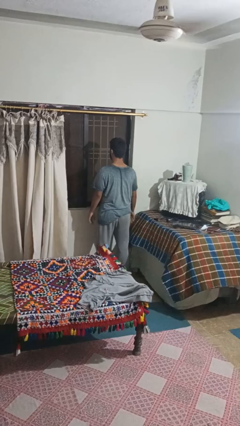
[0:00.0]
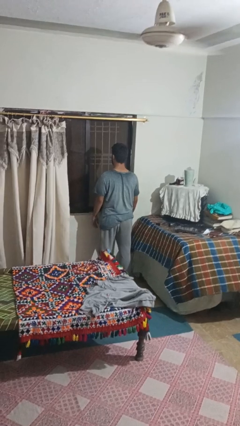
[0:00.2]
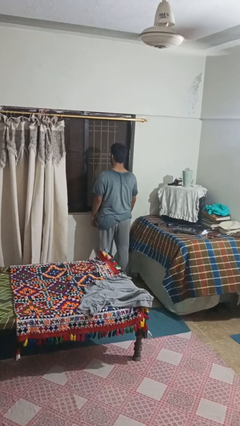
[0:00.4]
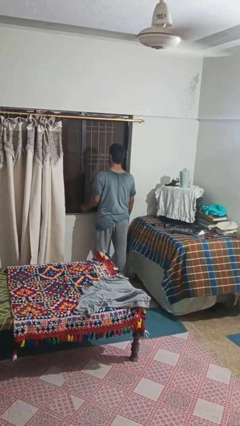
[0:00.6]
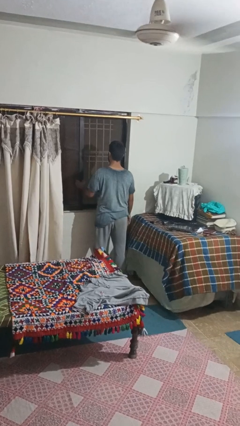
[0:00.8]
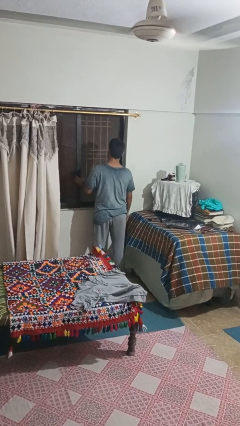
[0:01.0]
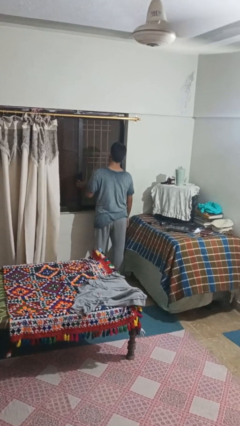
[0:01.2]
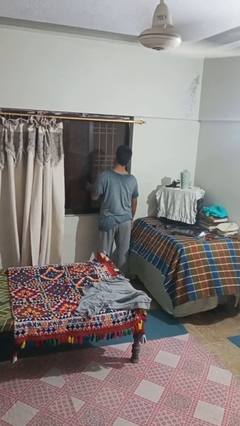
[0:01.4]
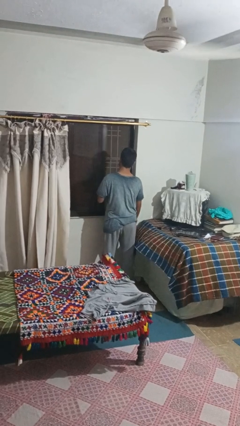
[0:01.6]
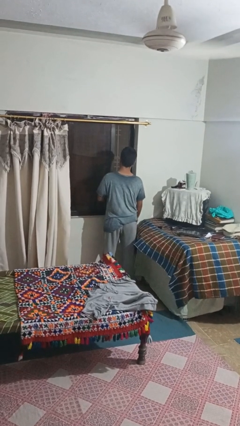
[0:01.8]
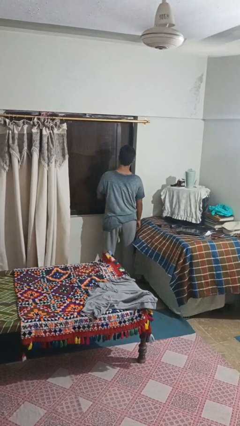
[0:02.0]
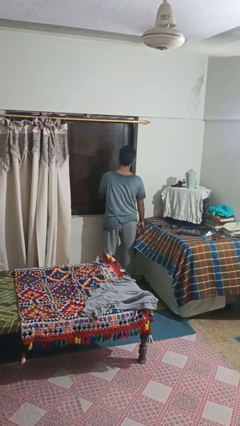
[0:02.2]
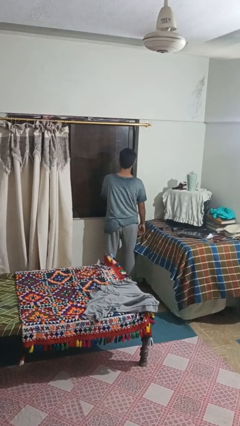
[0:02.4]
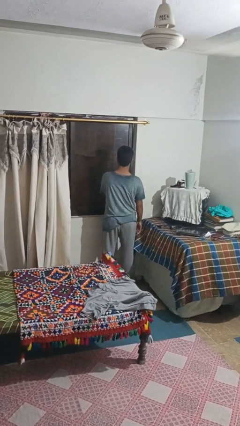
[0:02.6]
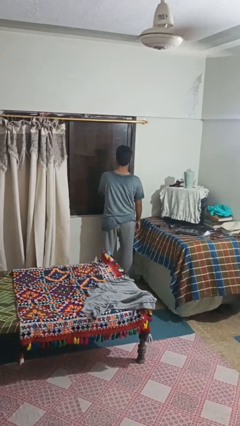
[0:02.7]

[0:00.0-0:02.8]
person closes home window

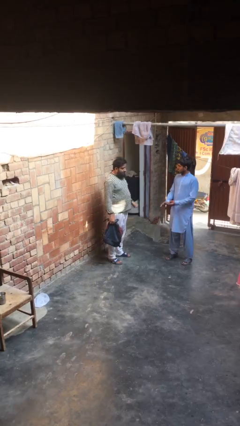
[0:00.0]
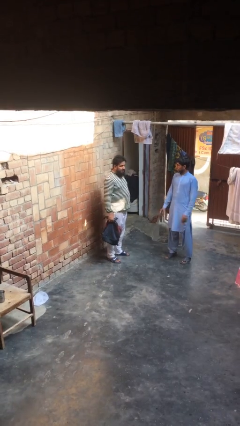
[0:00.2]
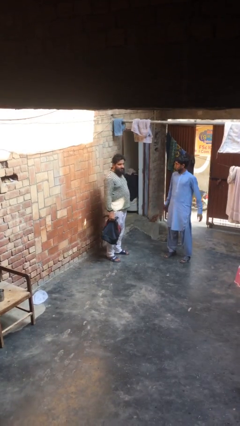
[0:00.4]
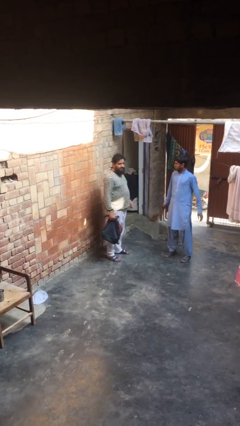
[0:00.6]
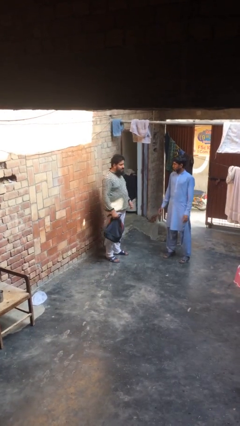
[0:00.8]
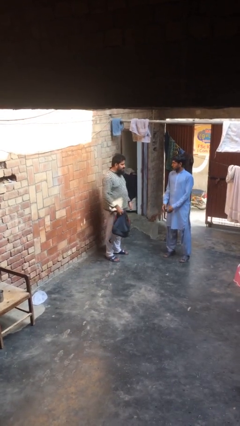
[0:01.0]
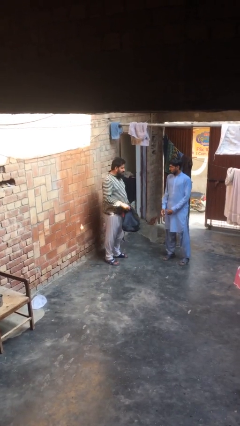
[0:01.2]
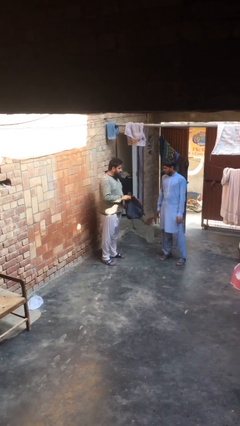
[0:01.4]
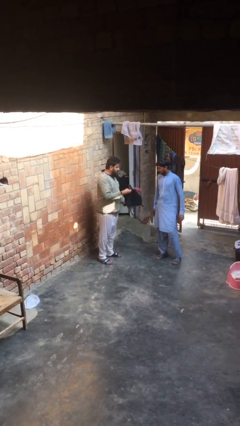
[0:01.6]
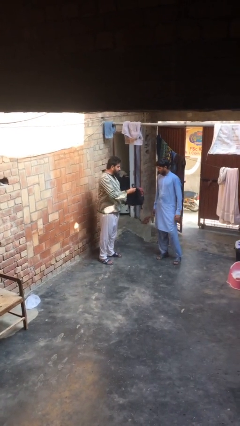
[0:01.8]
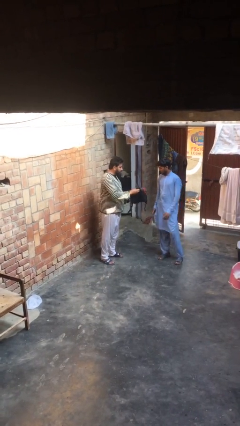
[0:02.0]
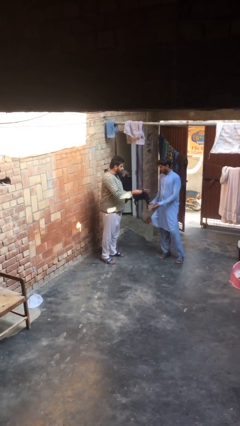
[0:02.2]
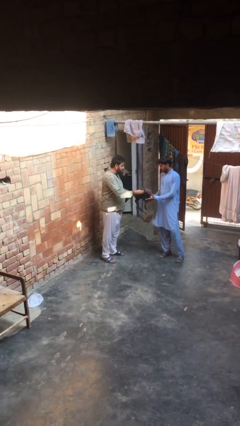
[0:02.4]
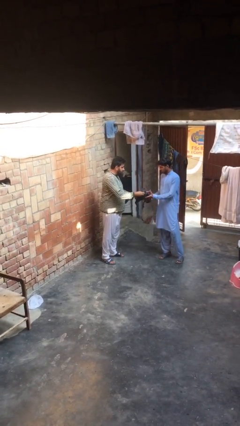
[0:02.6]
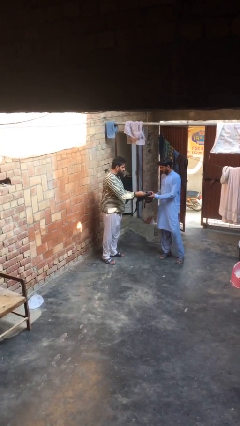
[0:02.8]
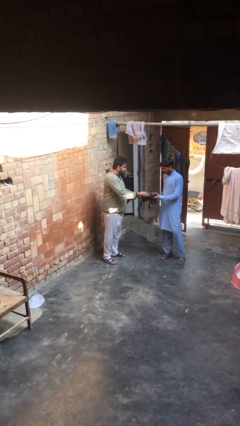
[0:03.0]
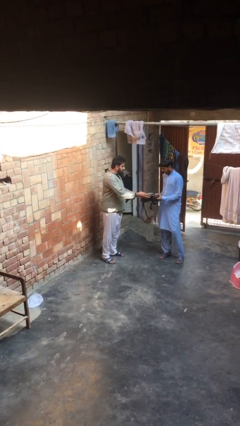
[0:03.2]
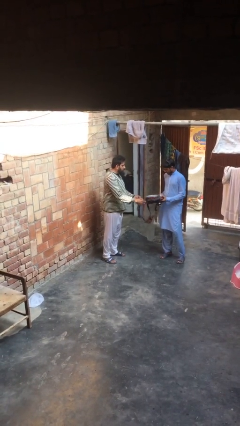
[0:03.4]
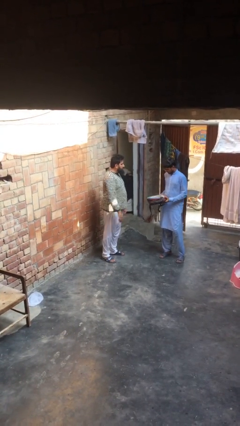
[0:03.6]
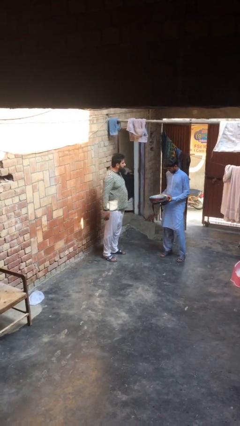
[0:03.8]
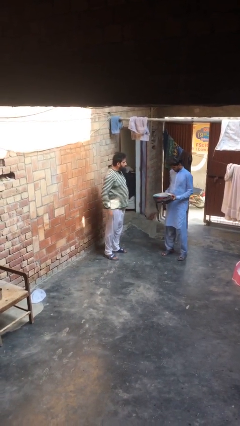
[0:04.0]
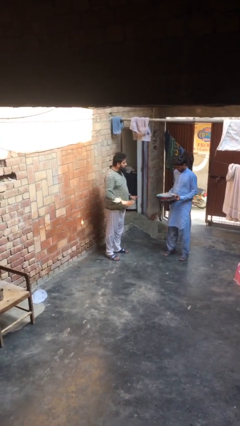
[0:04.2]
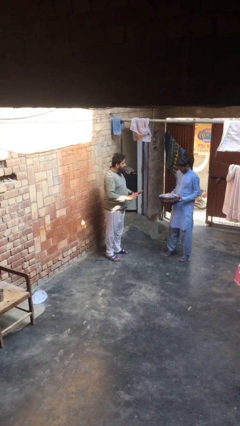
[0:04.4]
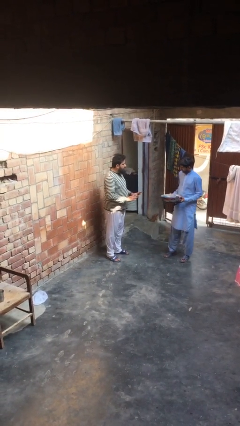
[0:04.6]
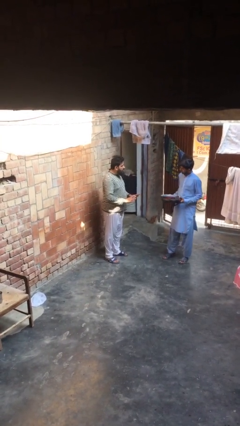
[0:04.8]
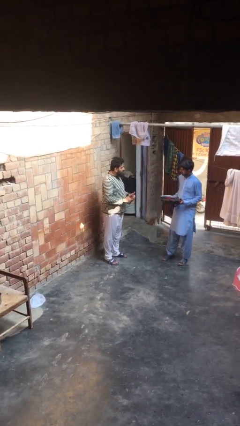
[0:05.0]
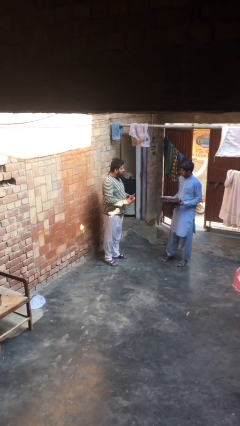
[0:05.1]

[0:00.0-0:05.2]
person transfers object to person

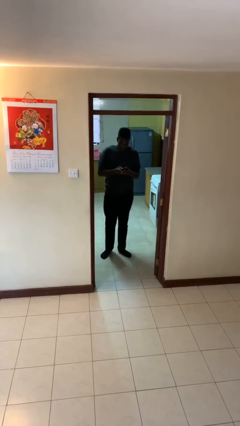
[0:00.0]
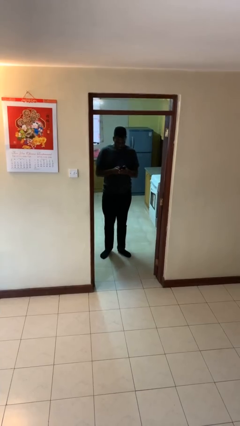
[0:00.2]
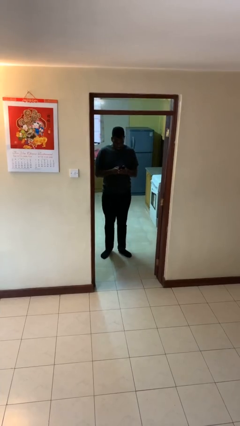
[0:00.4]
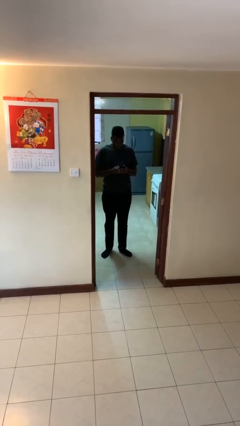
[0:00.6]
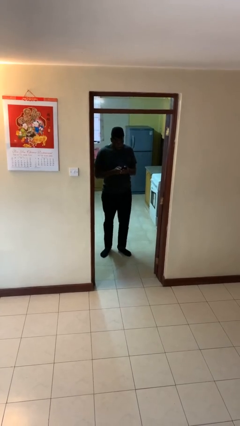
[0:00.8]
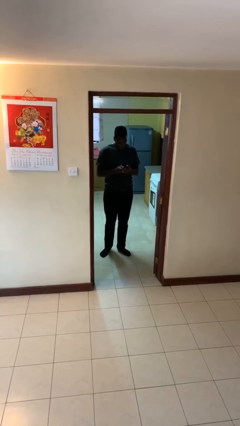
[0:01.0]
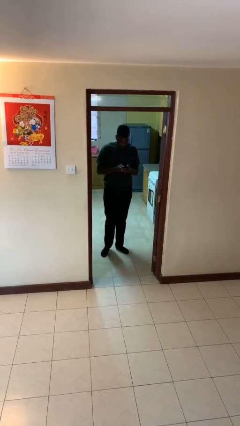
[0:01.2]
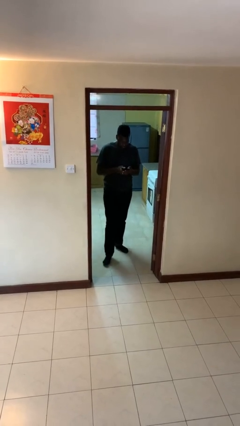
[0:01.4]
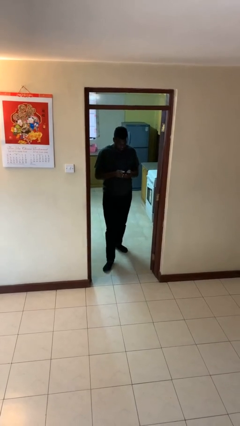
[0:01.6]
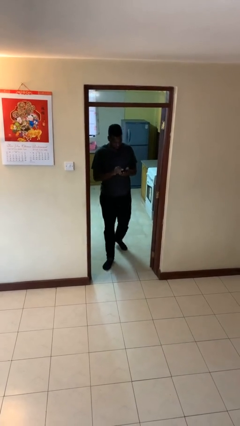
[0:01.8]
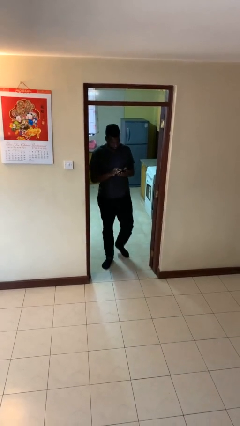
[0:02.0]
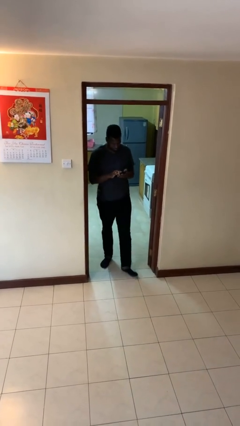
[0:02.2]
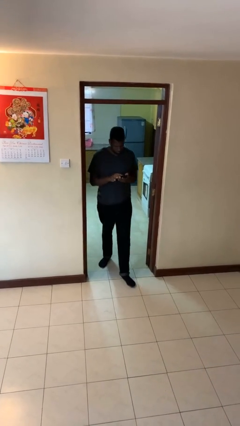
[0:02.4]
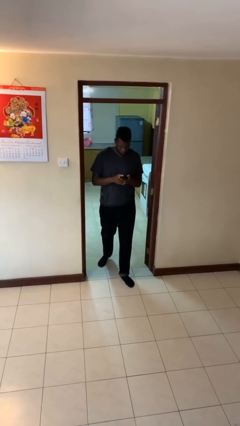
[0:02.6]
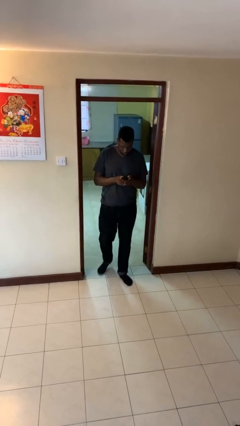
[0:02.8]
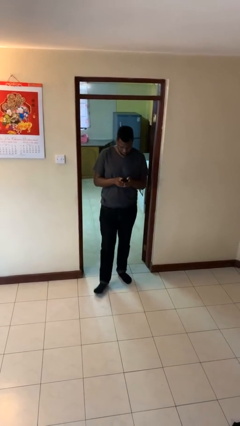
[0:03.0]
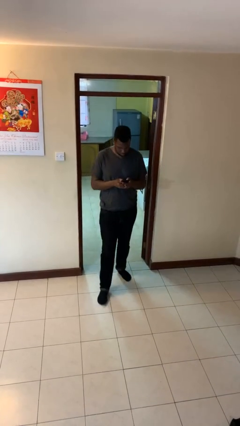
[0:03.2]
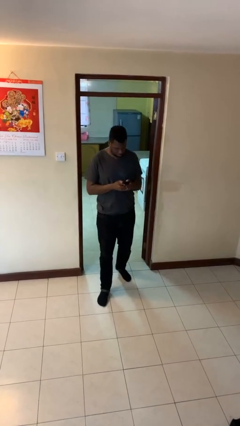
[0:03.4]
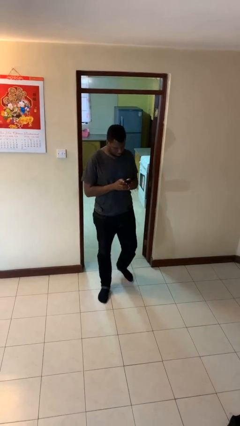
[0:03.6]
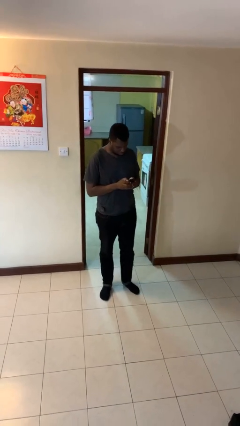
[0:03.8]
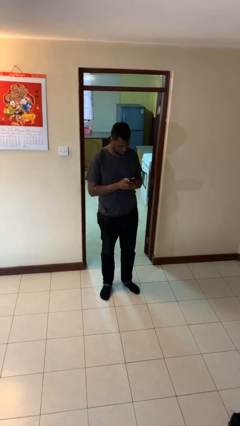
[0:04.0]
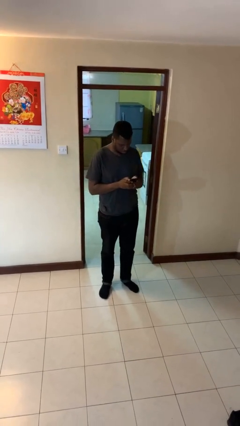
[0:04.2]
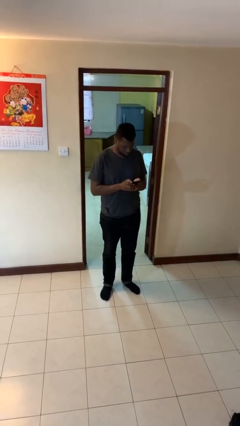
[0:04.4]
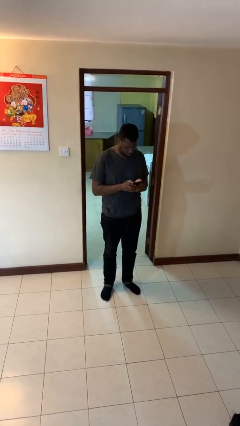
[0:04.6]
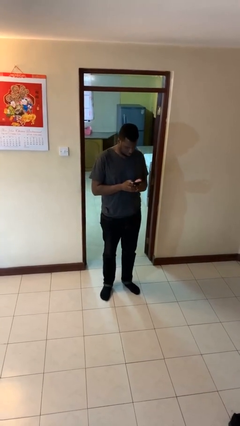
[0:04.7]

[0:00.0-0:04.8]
person enters scene through structure

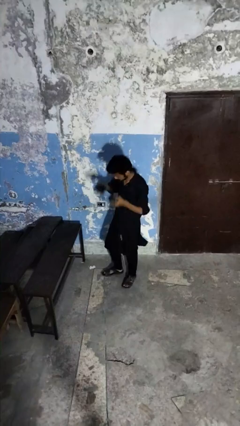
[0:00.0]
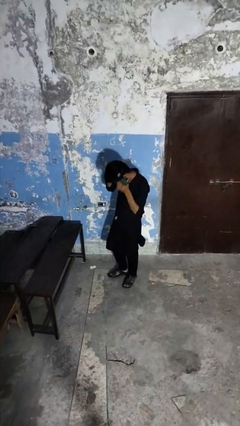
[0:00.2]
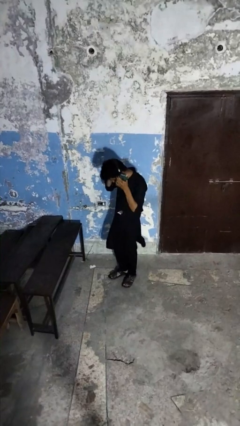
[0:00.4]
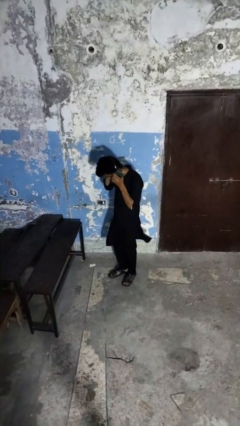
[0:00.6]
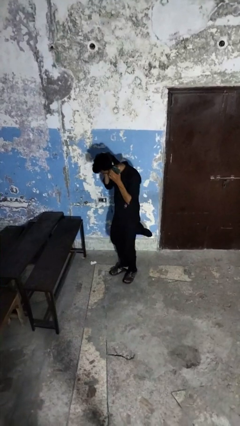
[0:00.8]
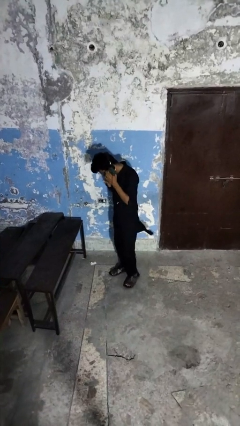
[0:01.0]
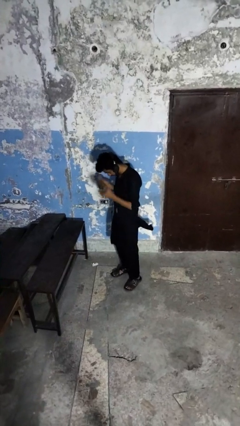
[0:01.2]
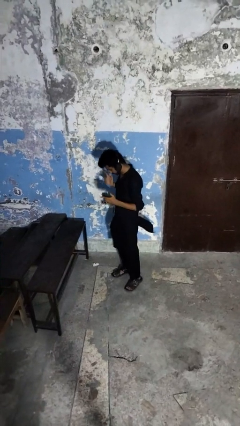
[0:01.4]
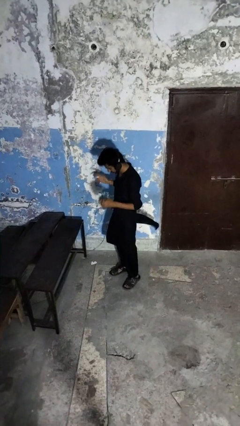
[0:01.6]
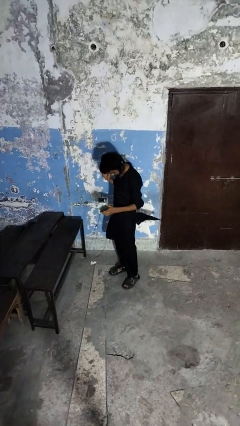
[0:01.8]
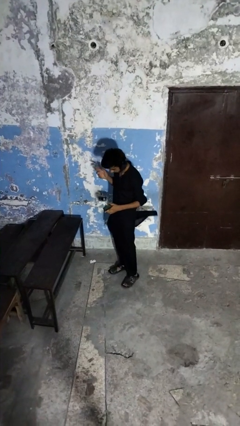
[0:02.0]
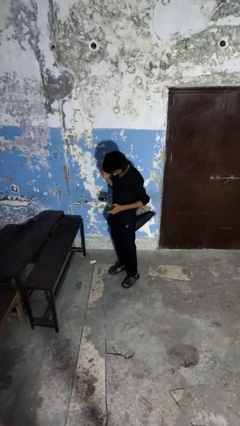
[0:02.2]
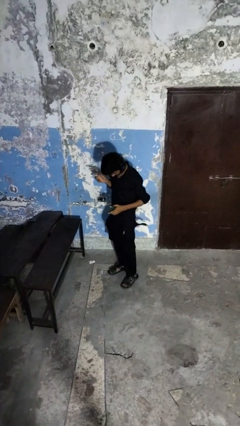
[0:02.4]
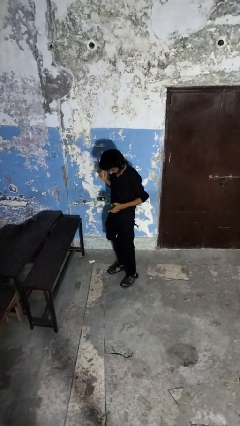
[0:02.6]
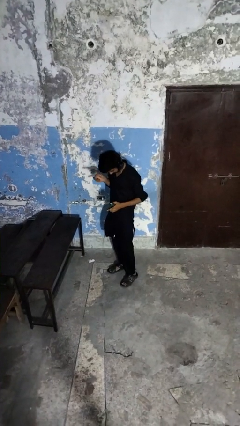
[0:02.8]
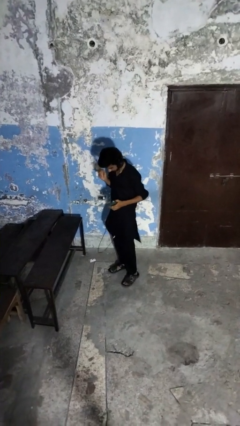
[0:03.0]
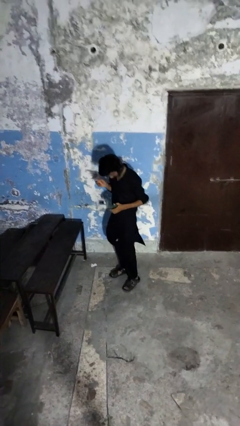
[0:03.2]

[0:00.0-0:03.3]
person puts on headphones

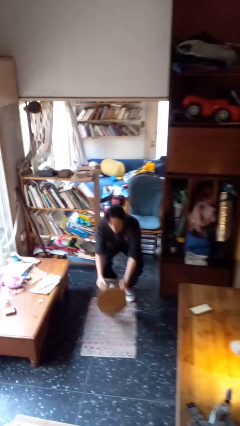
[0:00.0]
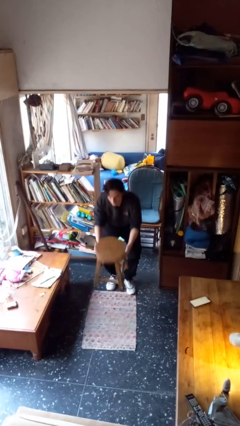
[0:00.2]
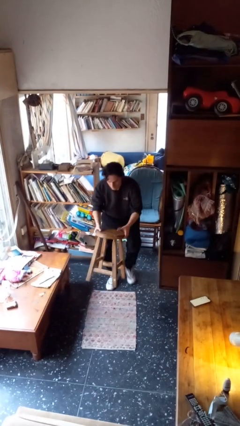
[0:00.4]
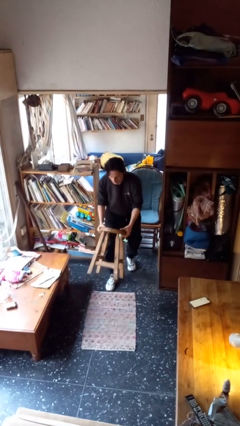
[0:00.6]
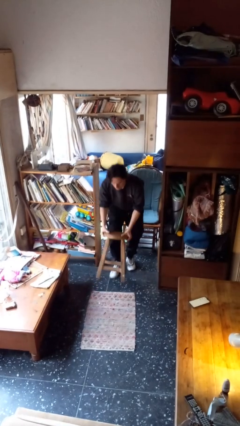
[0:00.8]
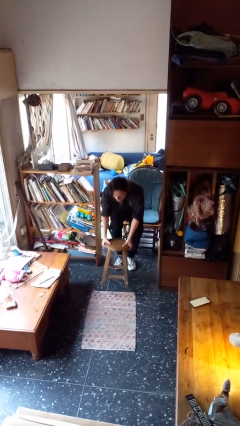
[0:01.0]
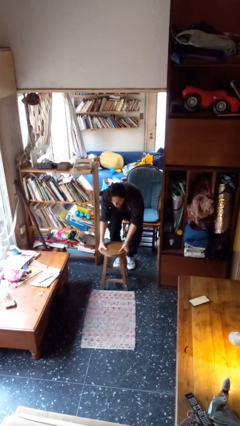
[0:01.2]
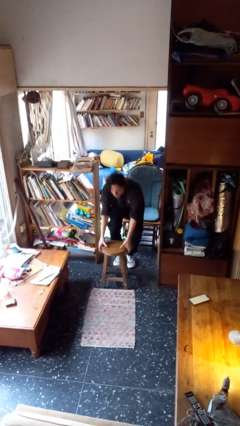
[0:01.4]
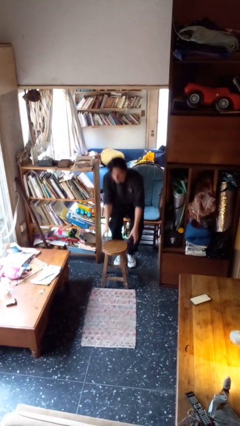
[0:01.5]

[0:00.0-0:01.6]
person sets upright furniture
